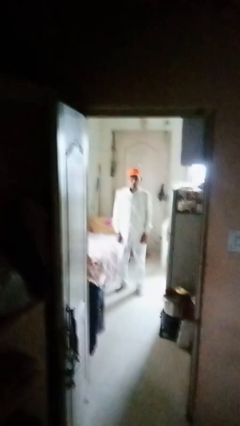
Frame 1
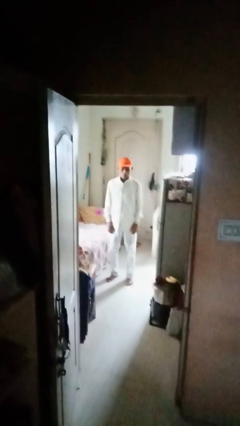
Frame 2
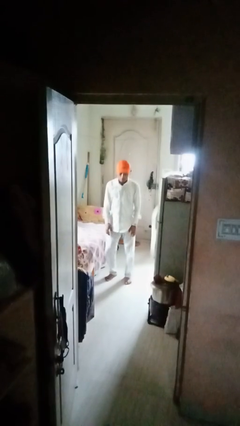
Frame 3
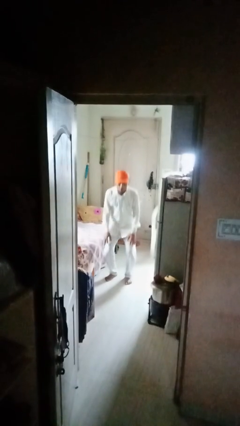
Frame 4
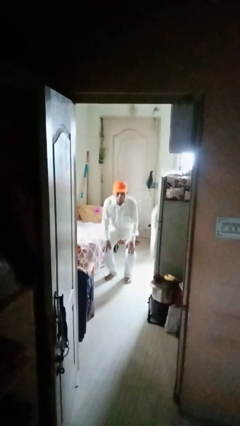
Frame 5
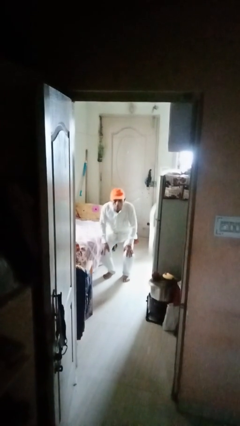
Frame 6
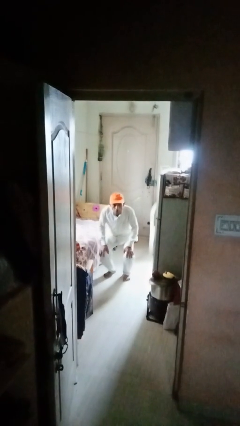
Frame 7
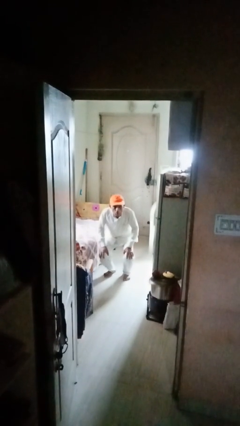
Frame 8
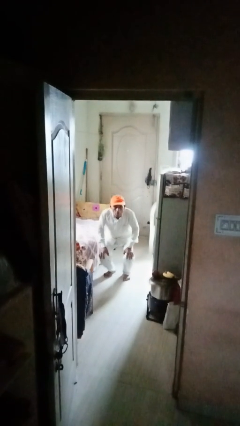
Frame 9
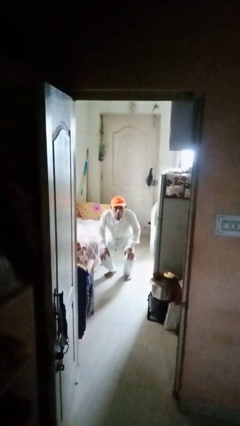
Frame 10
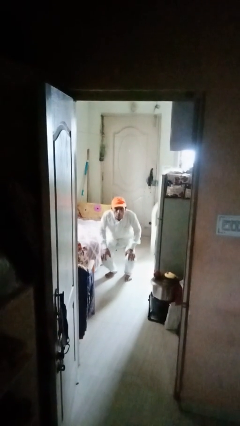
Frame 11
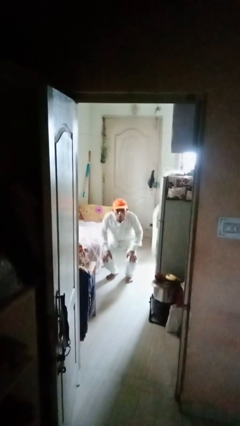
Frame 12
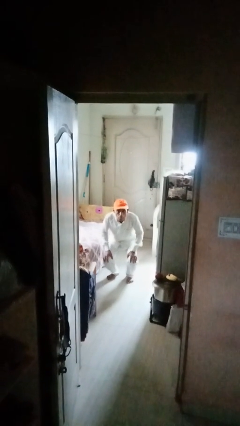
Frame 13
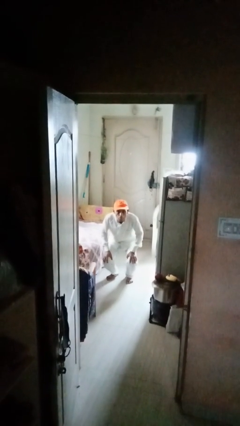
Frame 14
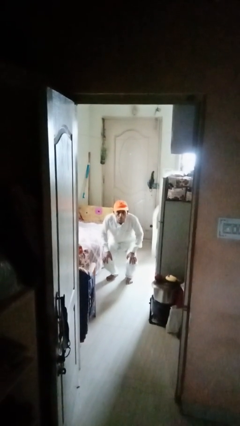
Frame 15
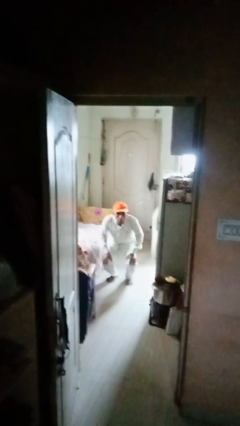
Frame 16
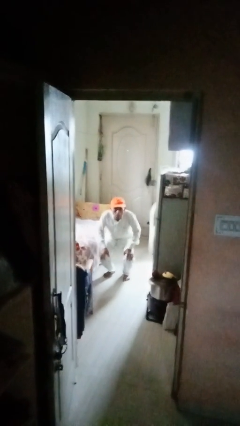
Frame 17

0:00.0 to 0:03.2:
person squats

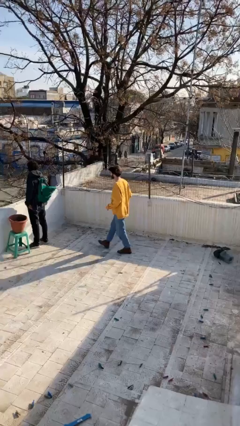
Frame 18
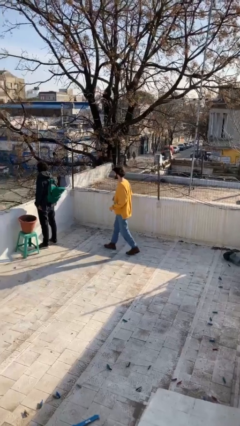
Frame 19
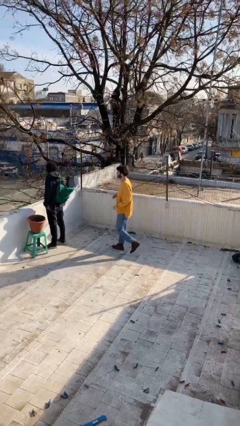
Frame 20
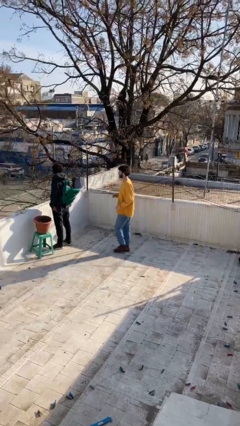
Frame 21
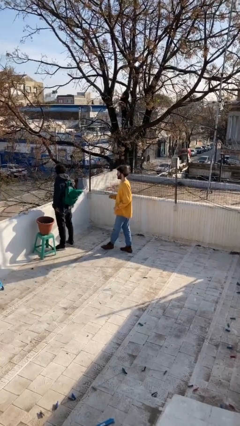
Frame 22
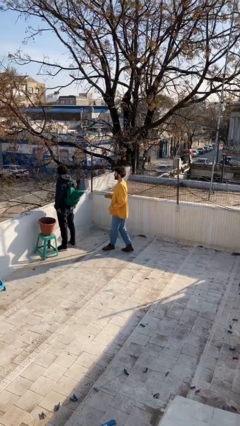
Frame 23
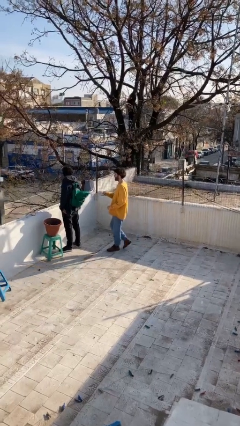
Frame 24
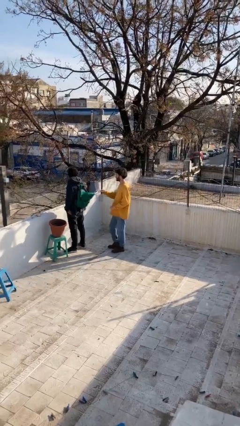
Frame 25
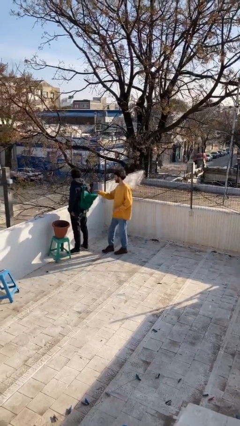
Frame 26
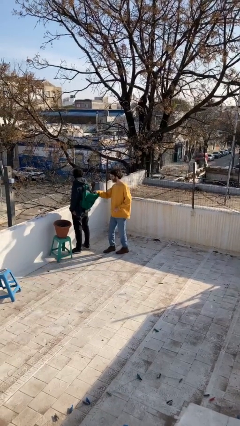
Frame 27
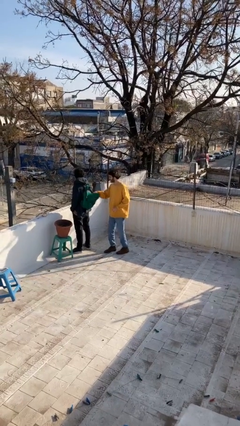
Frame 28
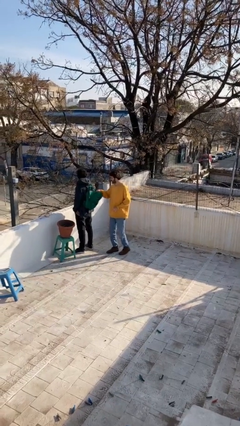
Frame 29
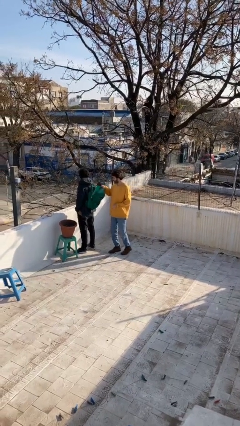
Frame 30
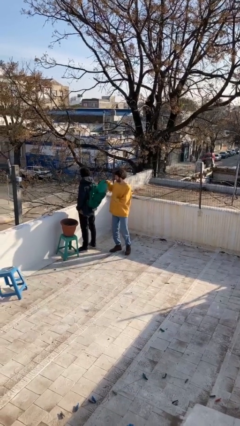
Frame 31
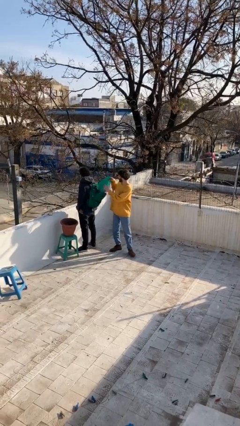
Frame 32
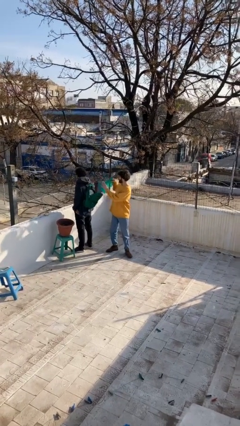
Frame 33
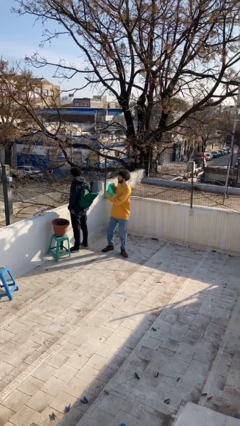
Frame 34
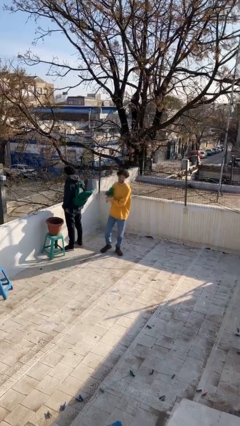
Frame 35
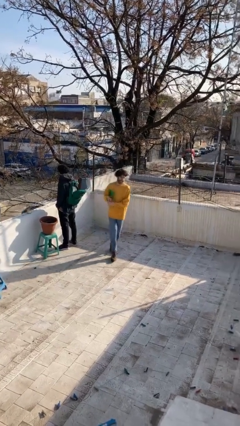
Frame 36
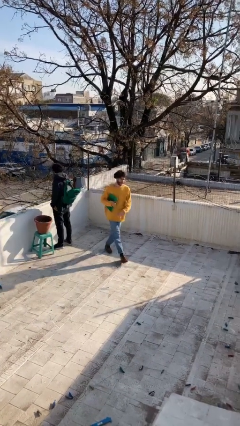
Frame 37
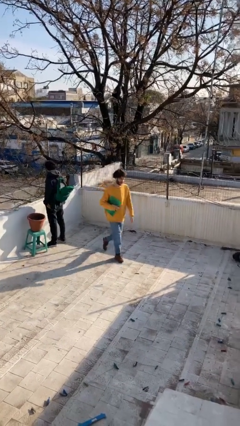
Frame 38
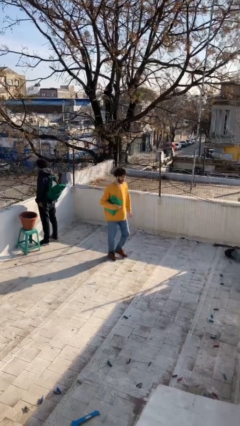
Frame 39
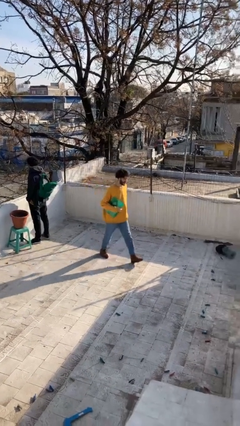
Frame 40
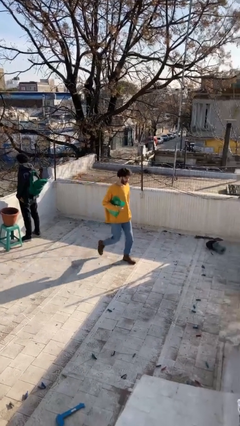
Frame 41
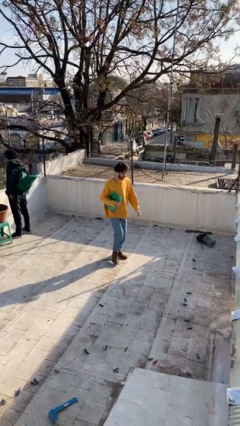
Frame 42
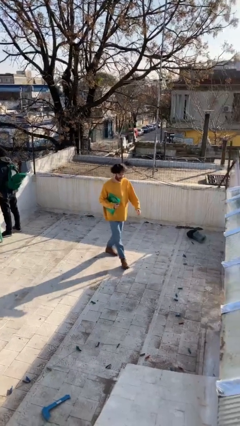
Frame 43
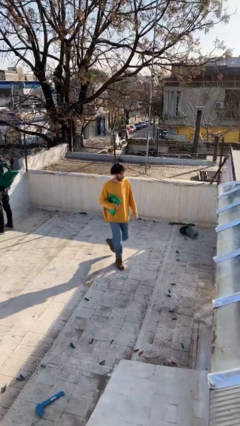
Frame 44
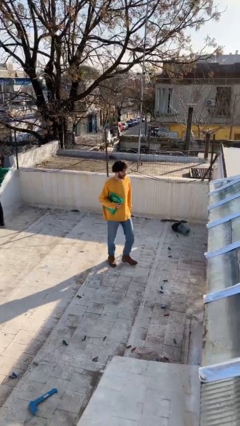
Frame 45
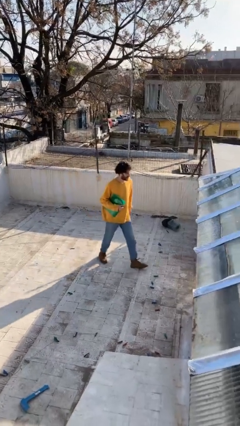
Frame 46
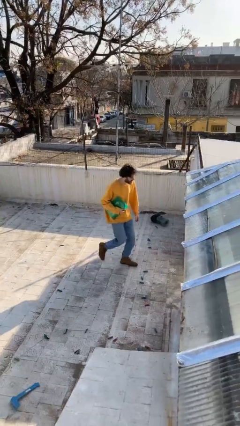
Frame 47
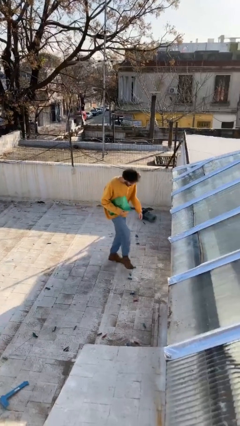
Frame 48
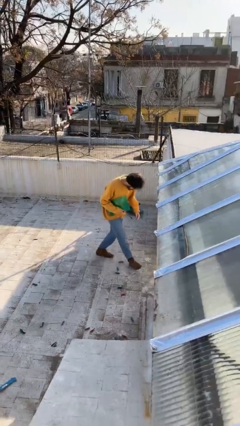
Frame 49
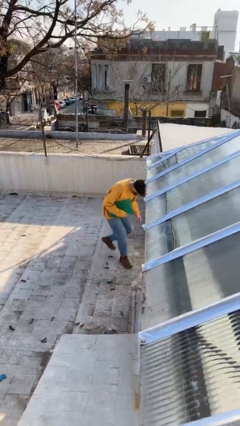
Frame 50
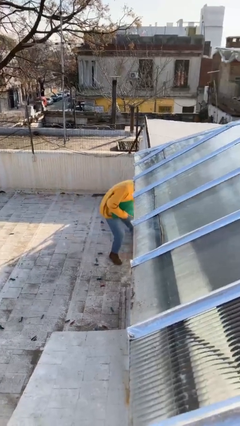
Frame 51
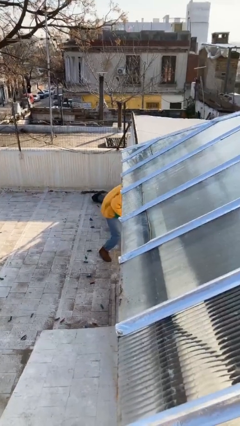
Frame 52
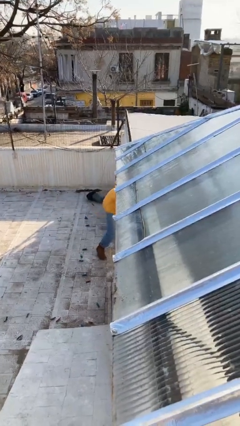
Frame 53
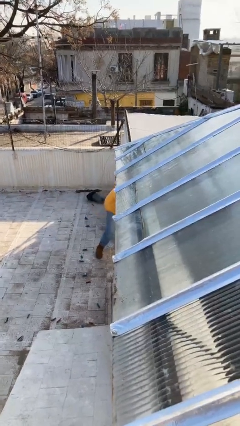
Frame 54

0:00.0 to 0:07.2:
person steals object from person

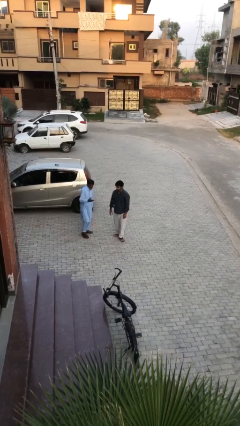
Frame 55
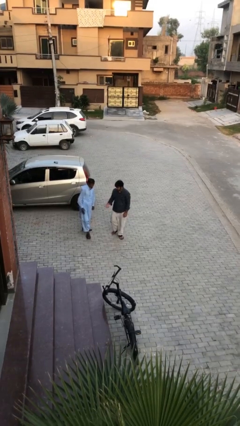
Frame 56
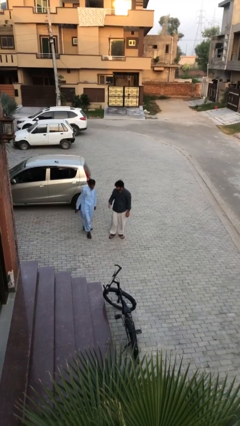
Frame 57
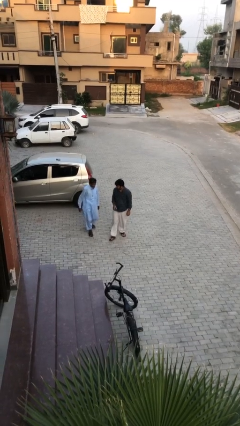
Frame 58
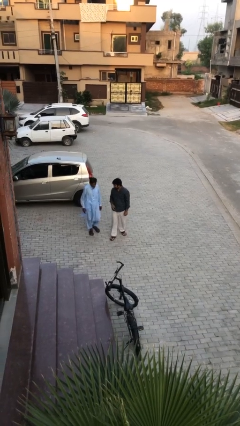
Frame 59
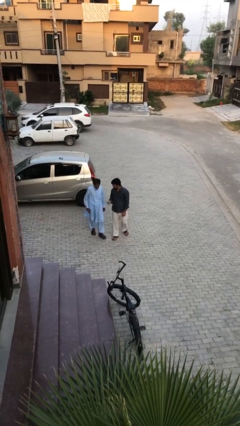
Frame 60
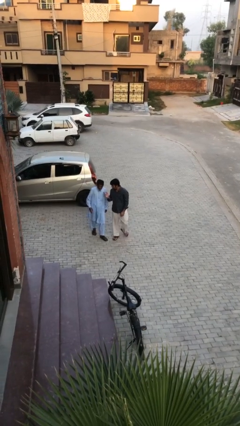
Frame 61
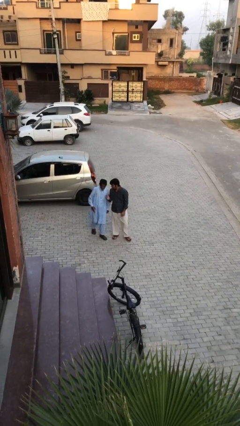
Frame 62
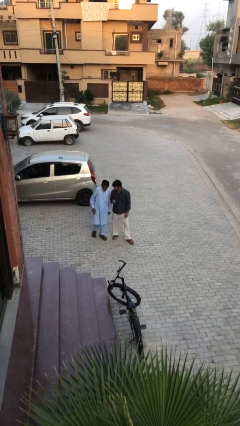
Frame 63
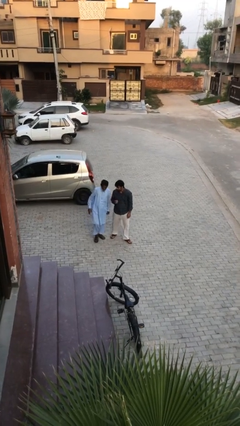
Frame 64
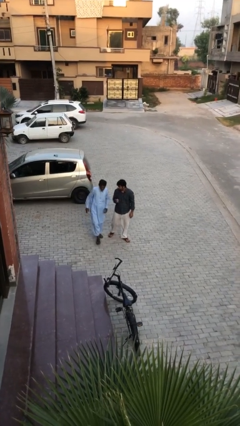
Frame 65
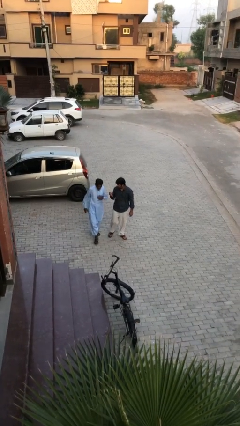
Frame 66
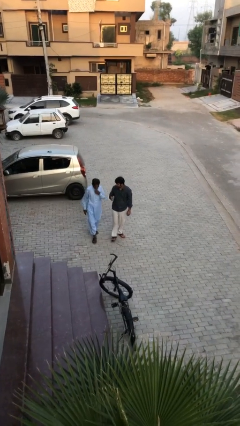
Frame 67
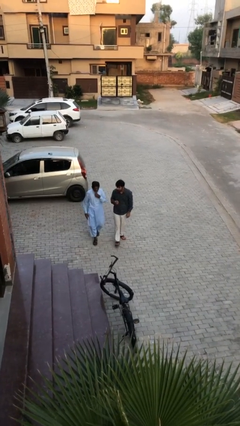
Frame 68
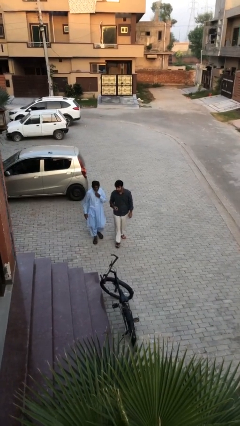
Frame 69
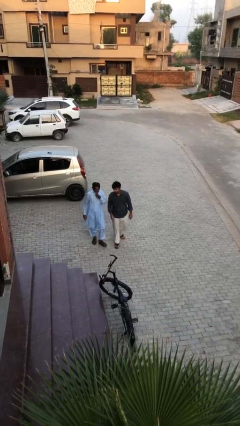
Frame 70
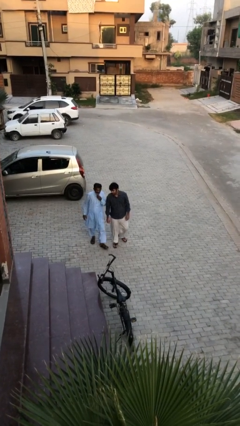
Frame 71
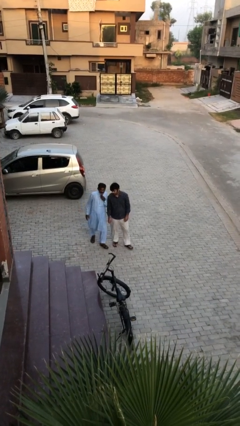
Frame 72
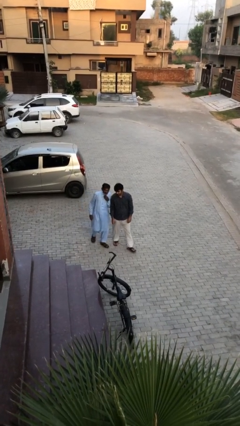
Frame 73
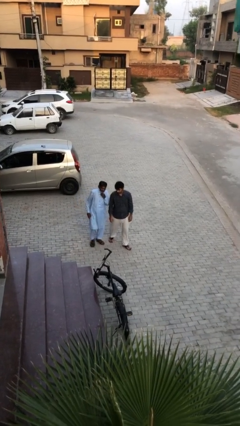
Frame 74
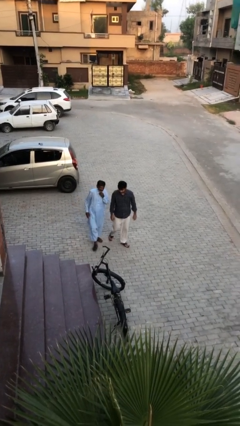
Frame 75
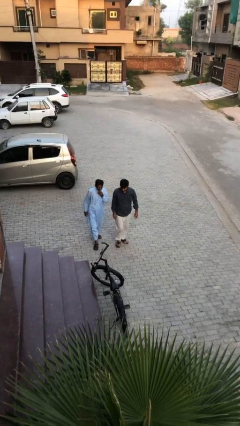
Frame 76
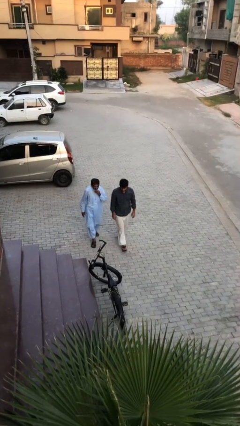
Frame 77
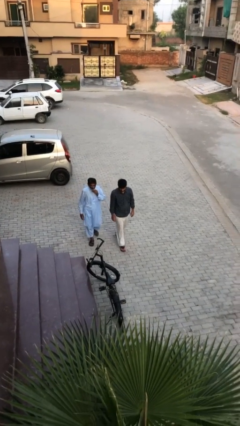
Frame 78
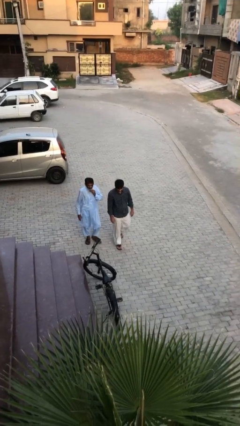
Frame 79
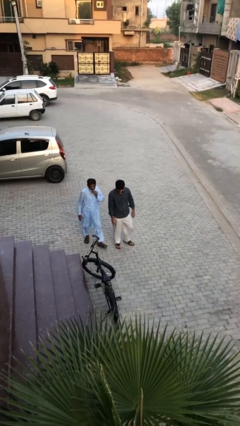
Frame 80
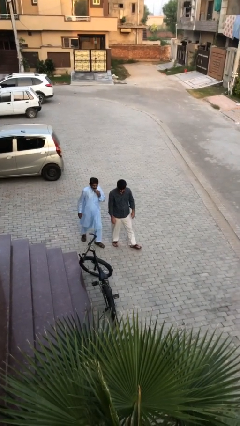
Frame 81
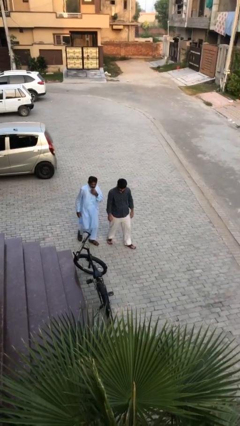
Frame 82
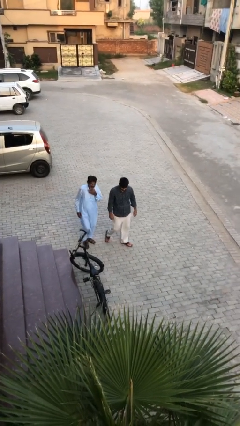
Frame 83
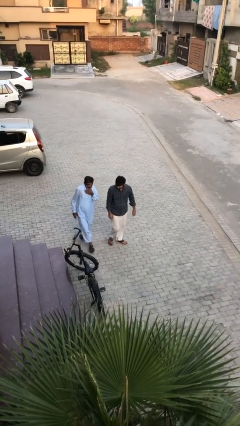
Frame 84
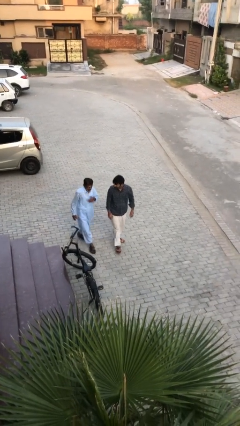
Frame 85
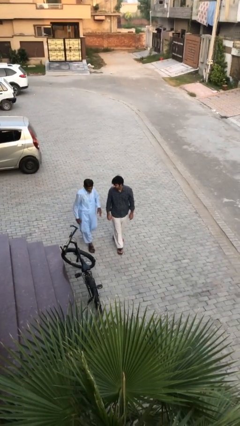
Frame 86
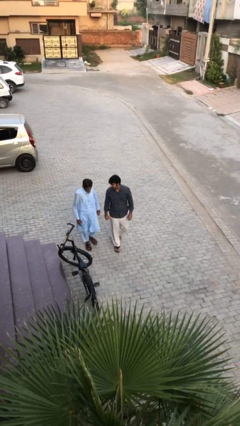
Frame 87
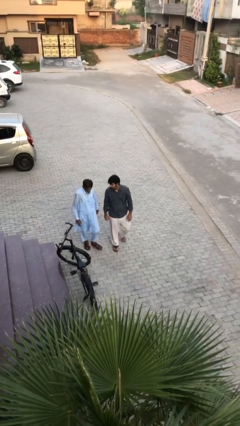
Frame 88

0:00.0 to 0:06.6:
person talks to person

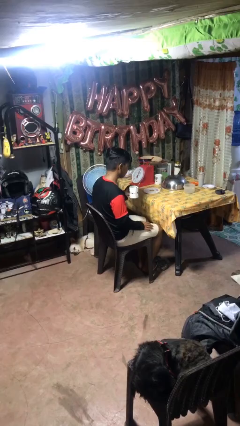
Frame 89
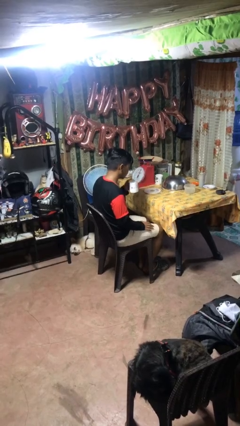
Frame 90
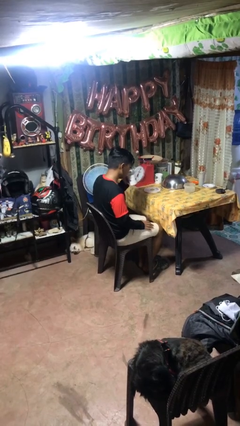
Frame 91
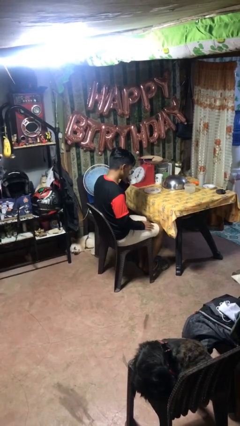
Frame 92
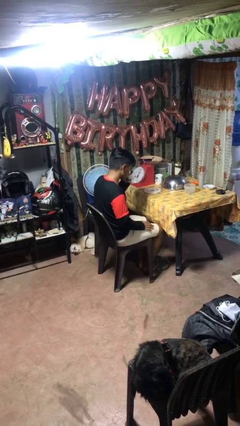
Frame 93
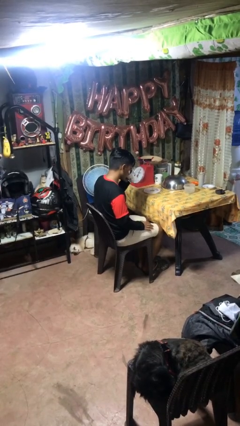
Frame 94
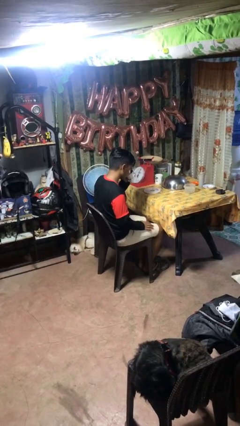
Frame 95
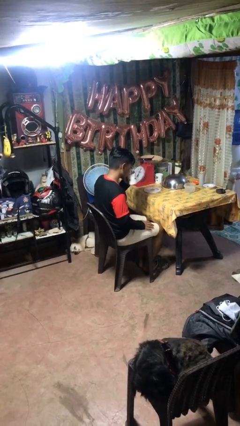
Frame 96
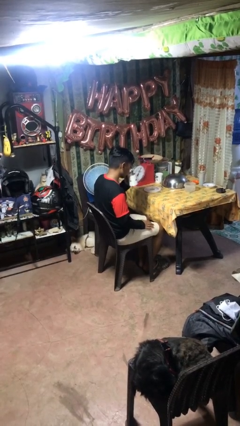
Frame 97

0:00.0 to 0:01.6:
person drinks from mug
